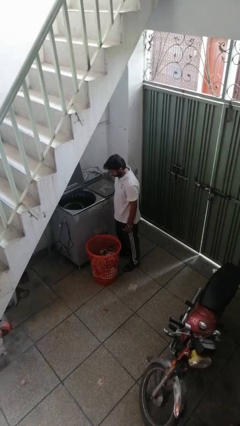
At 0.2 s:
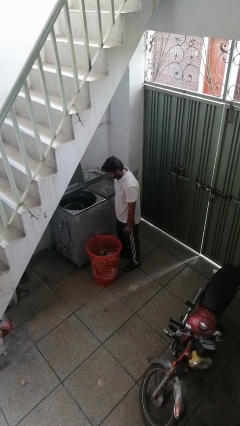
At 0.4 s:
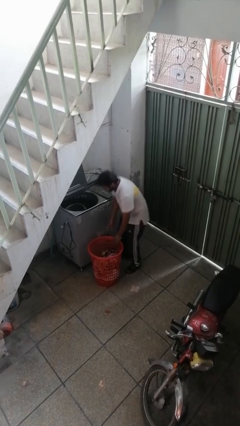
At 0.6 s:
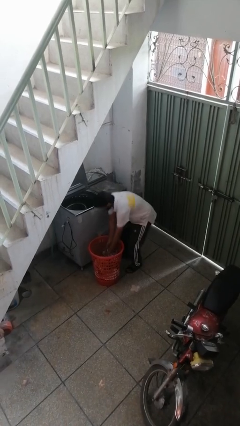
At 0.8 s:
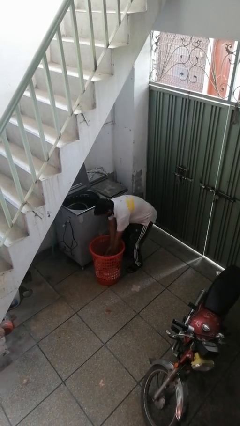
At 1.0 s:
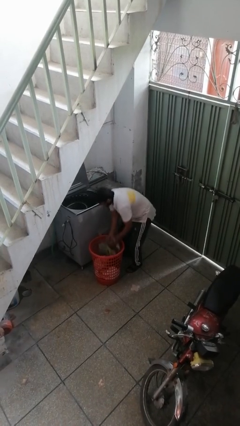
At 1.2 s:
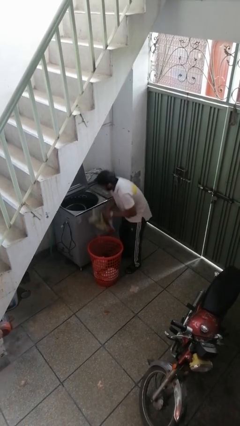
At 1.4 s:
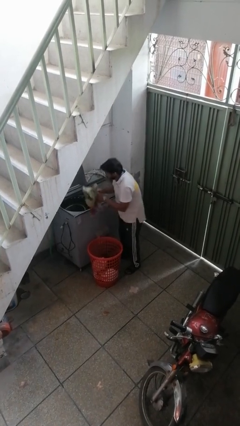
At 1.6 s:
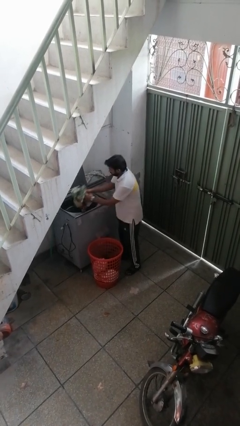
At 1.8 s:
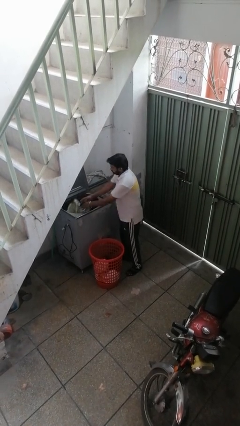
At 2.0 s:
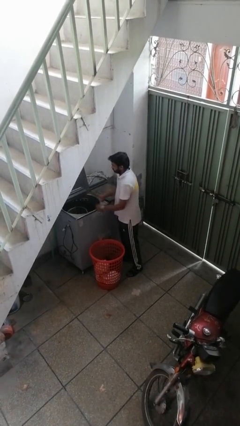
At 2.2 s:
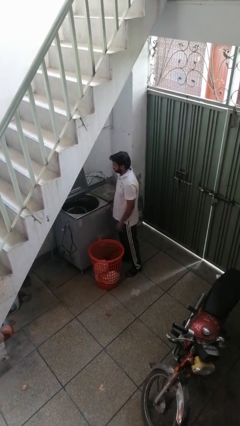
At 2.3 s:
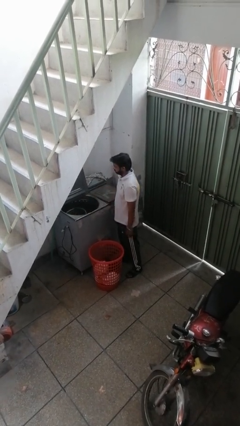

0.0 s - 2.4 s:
person loads clotheswasher

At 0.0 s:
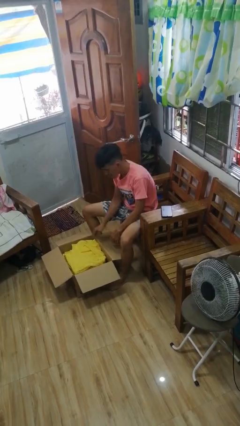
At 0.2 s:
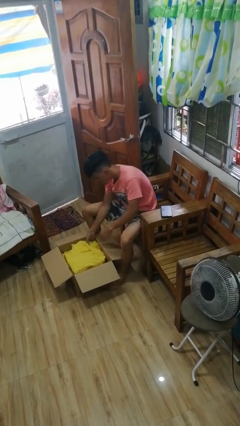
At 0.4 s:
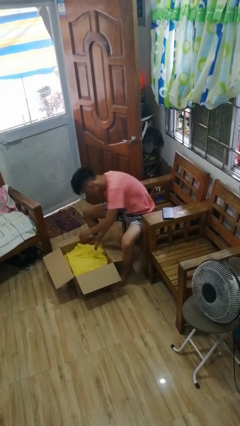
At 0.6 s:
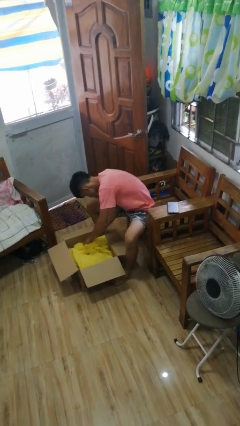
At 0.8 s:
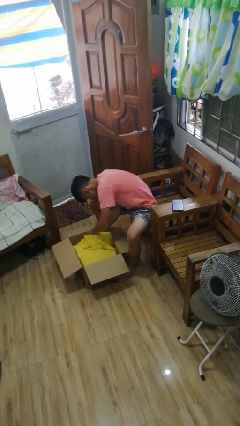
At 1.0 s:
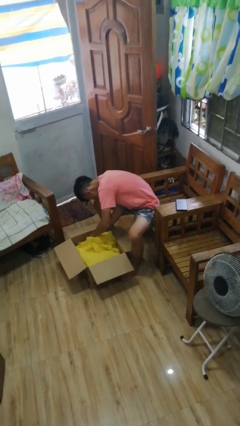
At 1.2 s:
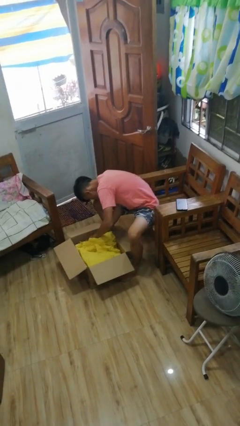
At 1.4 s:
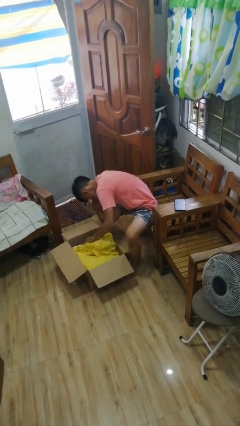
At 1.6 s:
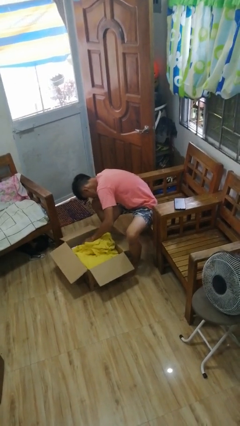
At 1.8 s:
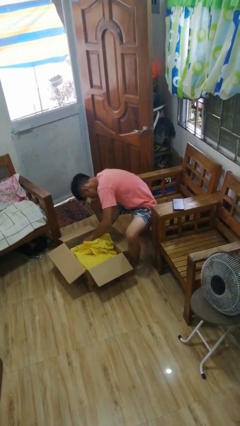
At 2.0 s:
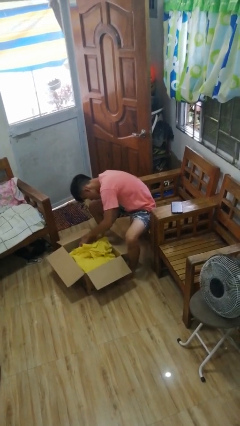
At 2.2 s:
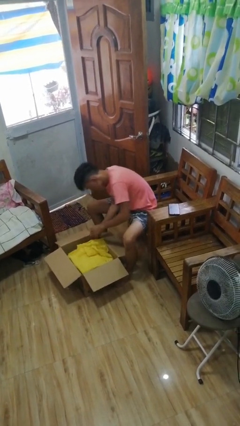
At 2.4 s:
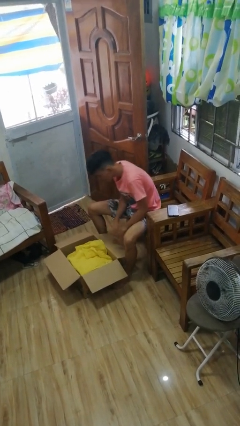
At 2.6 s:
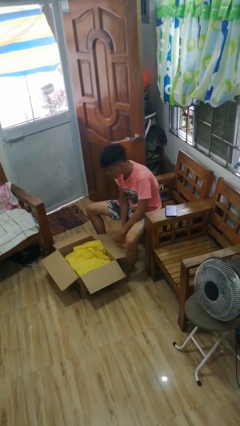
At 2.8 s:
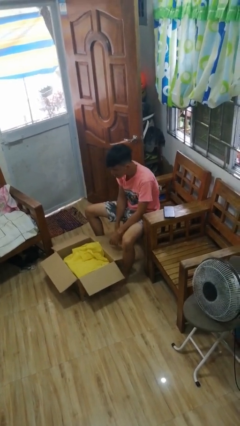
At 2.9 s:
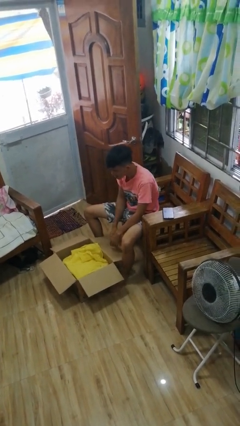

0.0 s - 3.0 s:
person searches in box

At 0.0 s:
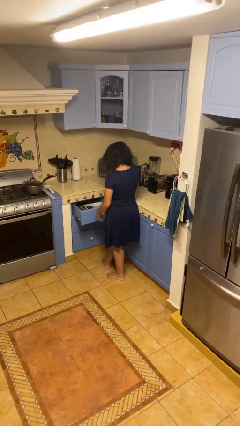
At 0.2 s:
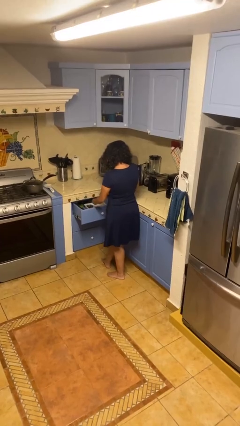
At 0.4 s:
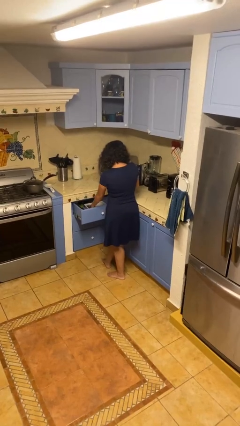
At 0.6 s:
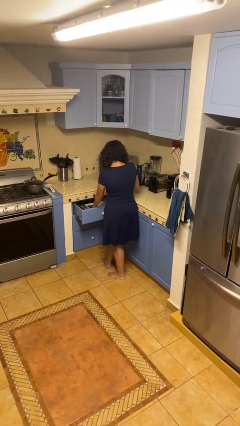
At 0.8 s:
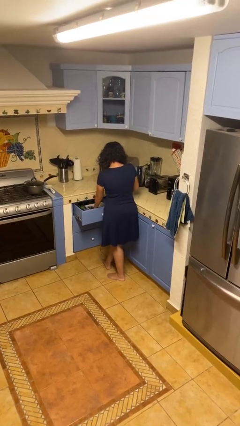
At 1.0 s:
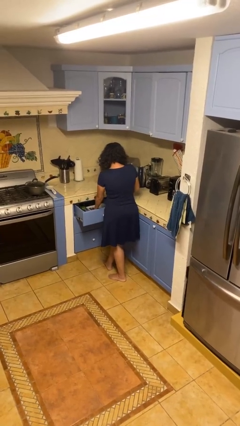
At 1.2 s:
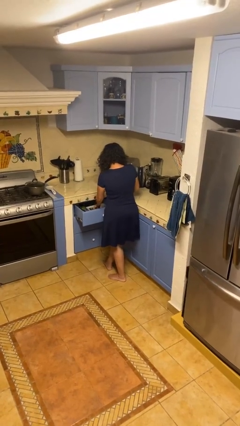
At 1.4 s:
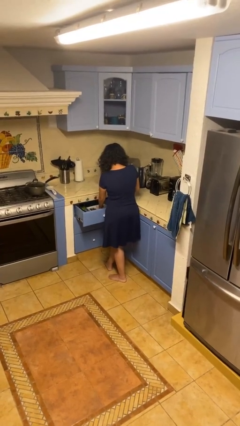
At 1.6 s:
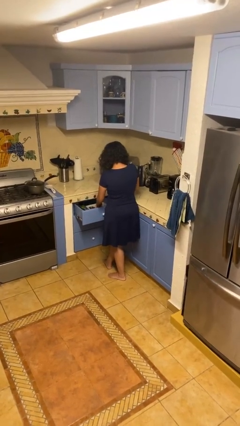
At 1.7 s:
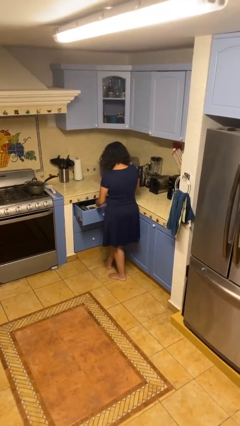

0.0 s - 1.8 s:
person searches in kitchen drawer

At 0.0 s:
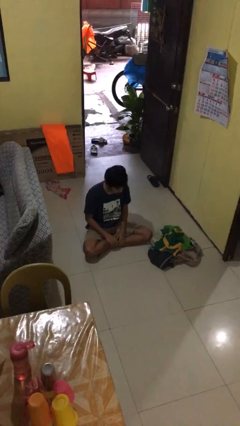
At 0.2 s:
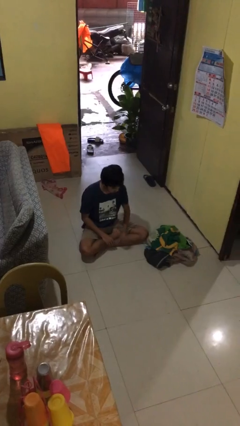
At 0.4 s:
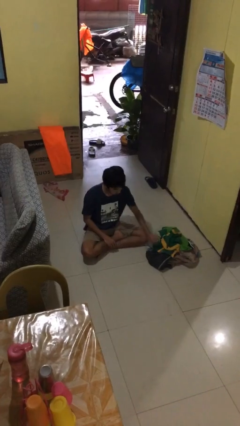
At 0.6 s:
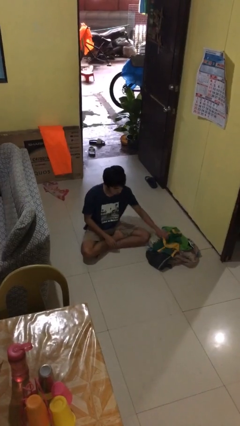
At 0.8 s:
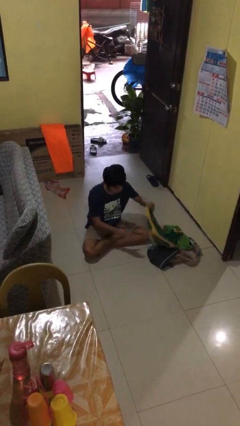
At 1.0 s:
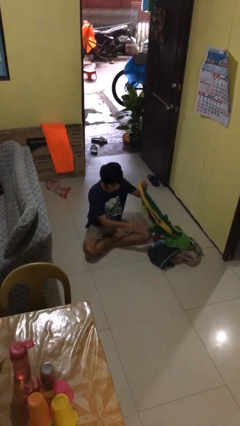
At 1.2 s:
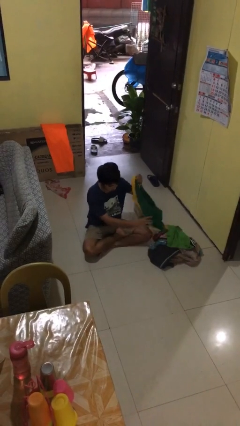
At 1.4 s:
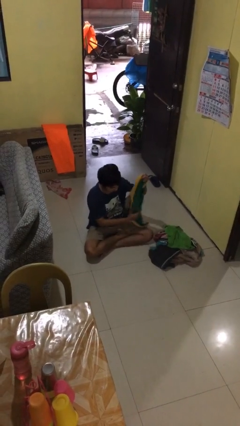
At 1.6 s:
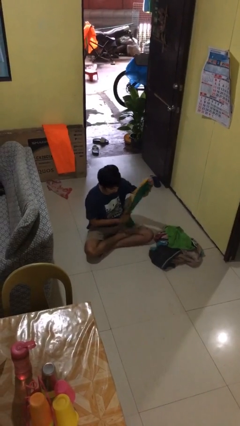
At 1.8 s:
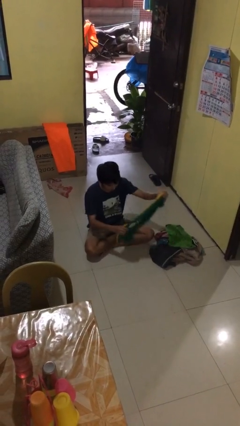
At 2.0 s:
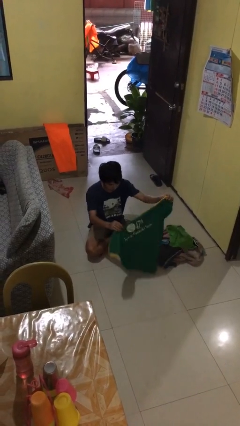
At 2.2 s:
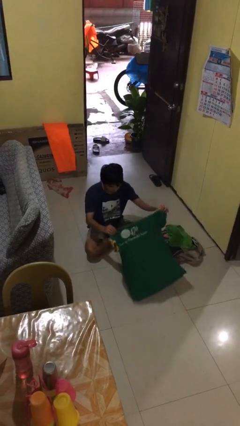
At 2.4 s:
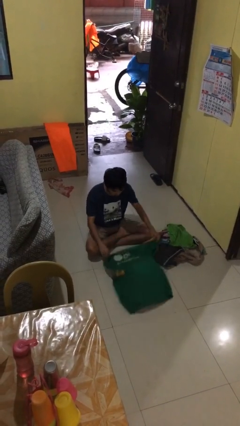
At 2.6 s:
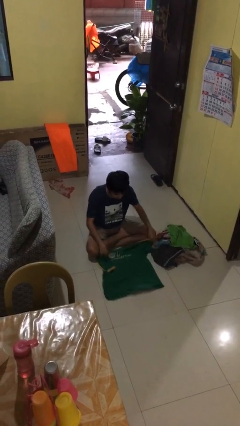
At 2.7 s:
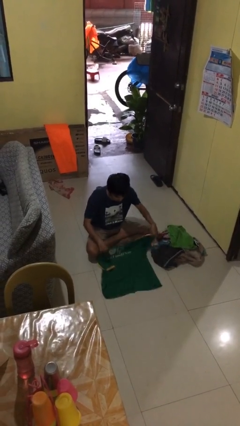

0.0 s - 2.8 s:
person folds shirt

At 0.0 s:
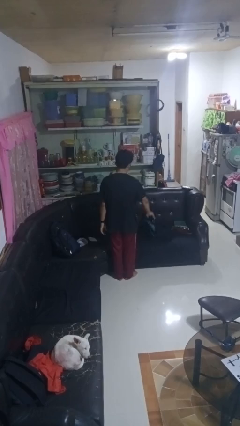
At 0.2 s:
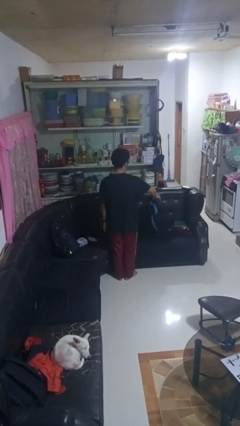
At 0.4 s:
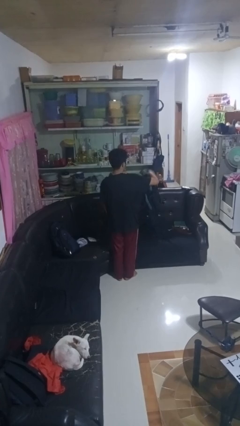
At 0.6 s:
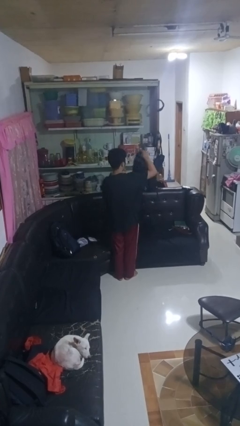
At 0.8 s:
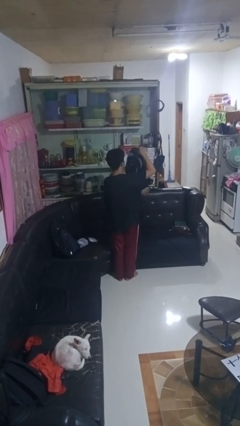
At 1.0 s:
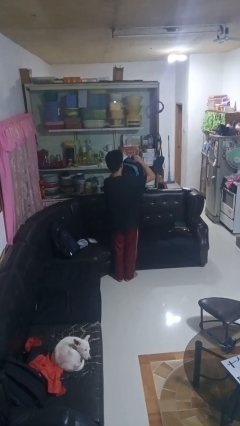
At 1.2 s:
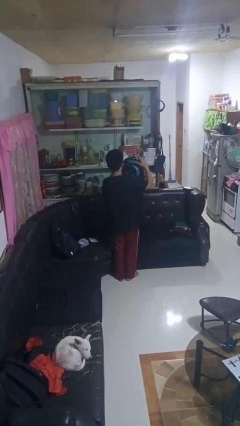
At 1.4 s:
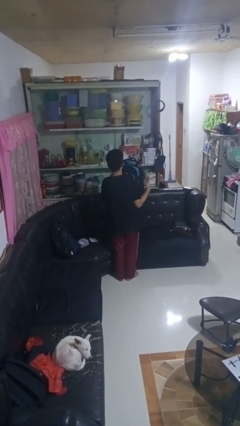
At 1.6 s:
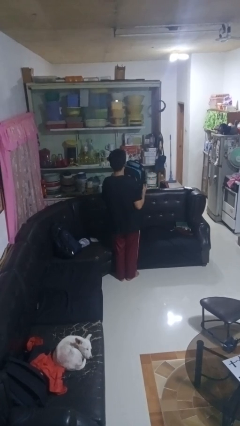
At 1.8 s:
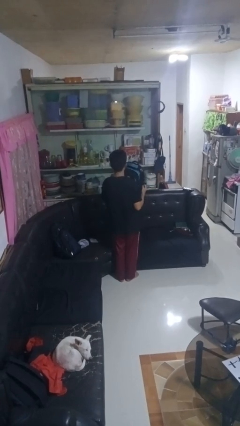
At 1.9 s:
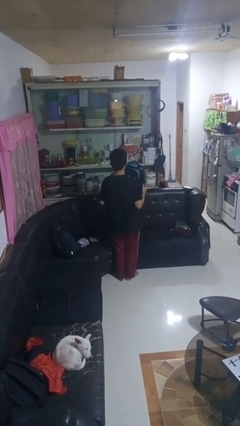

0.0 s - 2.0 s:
person picks up object from couch

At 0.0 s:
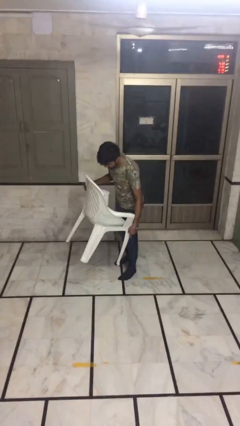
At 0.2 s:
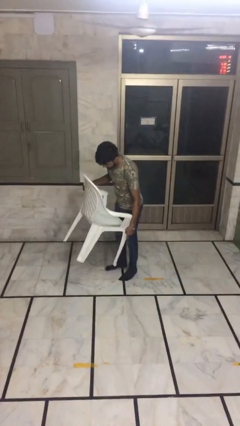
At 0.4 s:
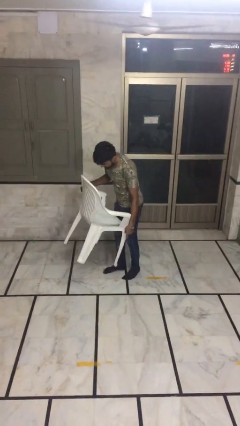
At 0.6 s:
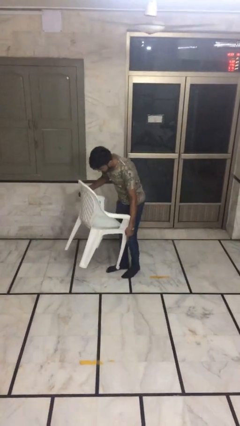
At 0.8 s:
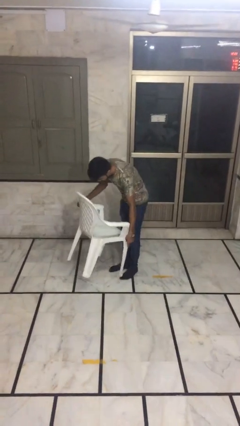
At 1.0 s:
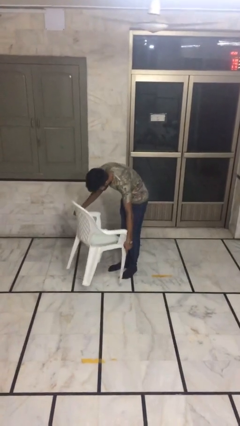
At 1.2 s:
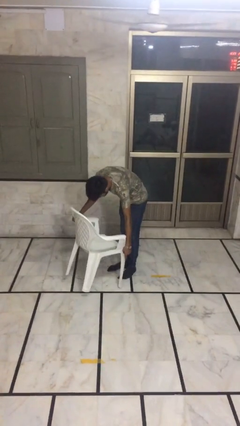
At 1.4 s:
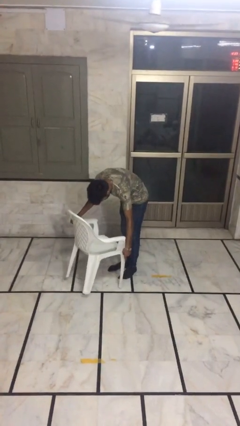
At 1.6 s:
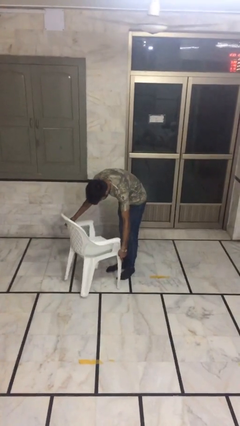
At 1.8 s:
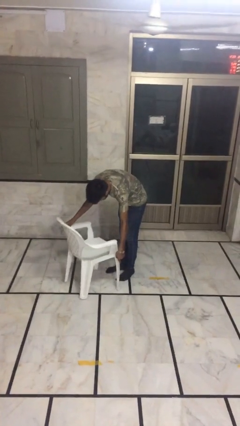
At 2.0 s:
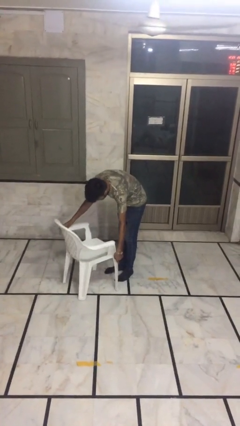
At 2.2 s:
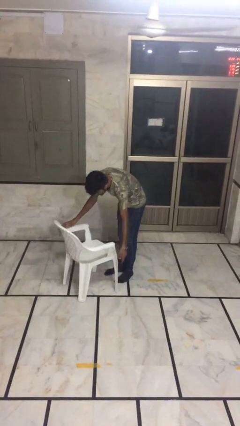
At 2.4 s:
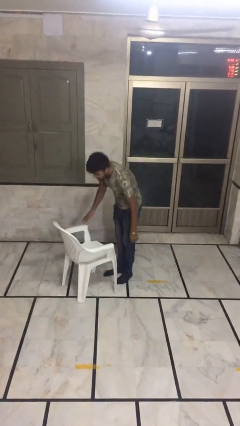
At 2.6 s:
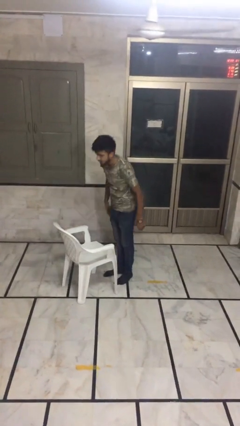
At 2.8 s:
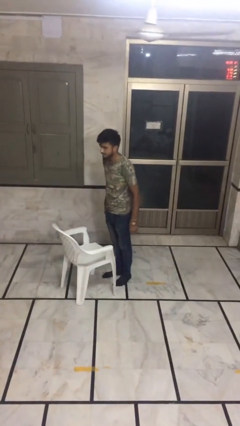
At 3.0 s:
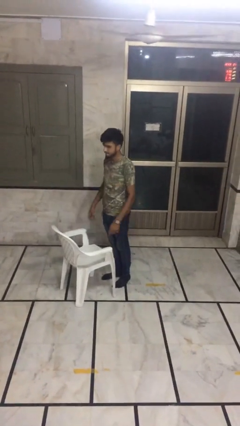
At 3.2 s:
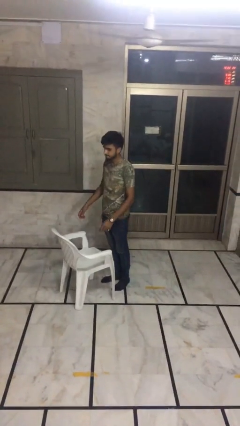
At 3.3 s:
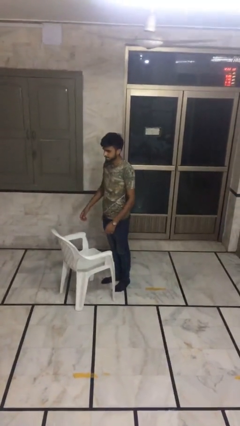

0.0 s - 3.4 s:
person puts down object on floor

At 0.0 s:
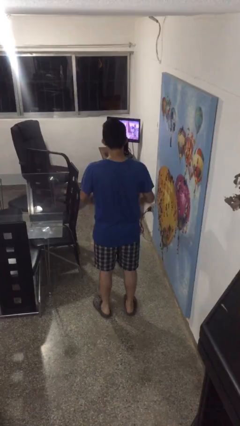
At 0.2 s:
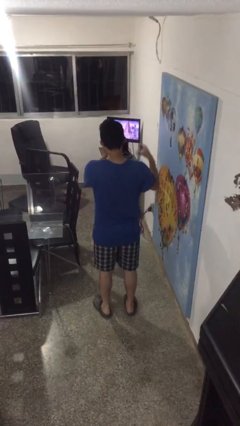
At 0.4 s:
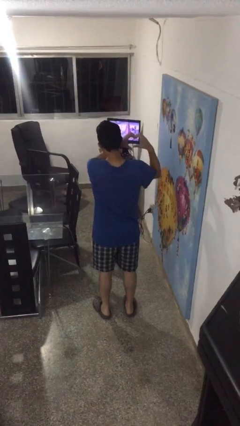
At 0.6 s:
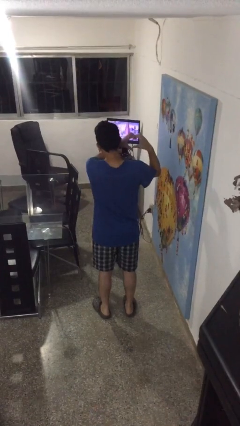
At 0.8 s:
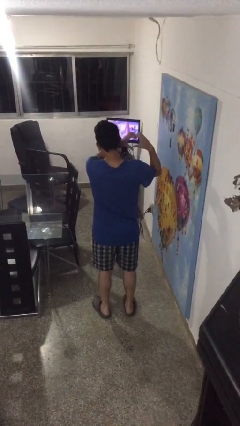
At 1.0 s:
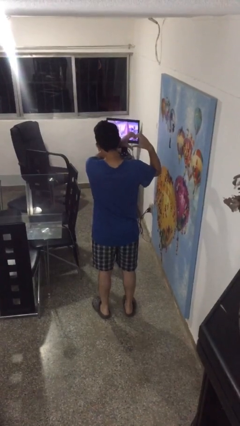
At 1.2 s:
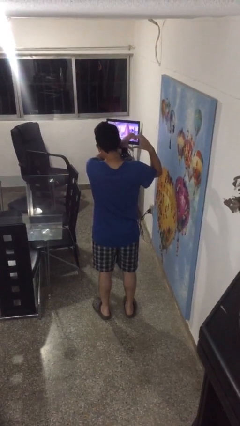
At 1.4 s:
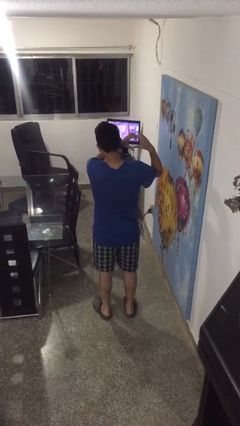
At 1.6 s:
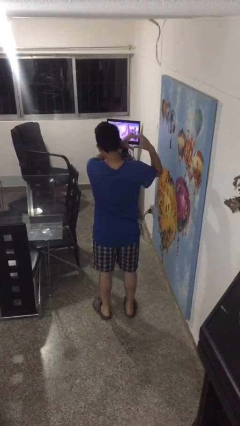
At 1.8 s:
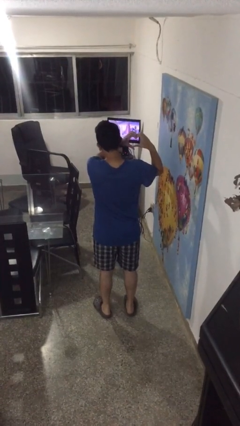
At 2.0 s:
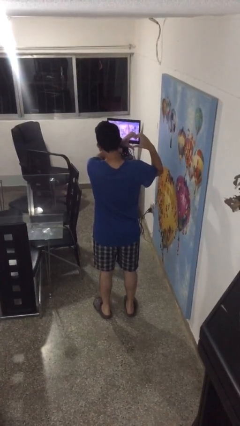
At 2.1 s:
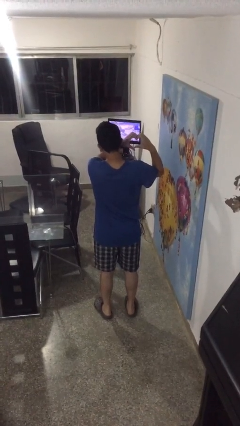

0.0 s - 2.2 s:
person gestures heart
